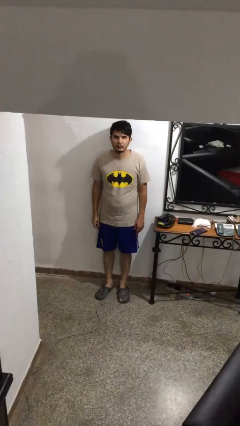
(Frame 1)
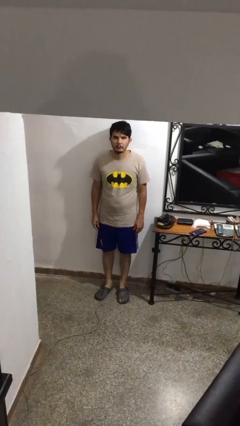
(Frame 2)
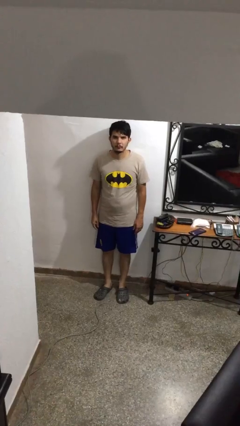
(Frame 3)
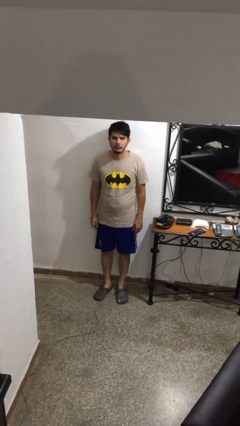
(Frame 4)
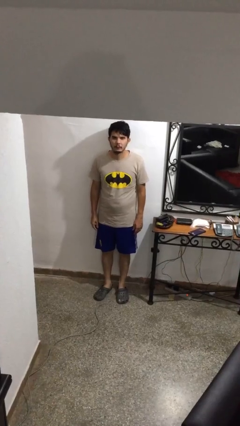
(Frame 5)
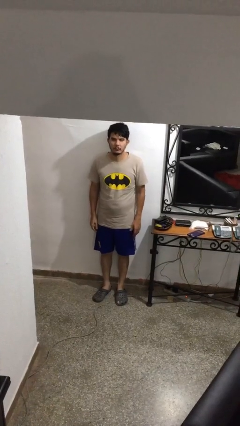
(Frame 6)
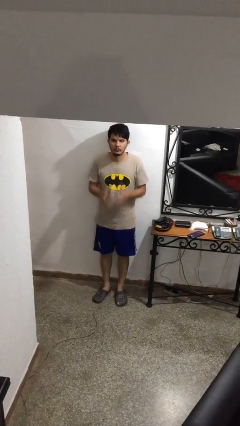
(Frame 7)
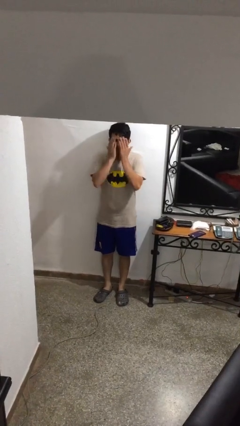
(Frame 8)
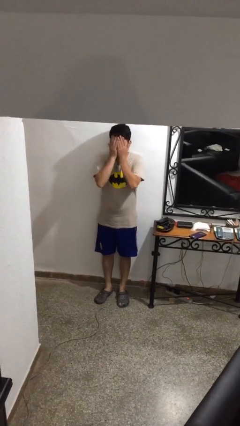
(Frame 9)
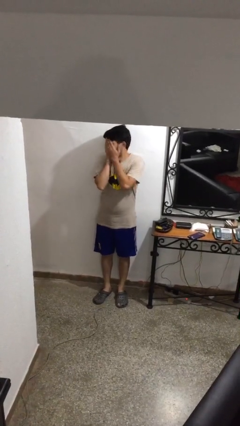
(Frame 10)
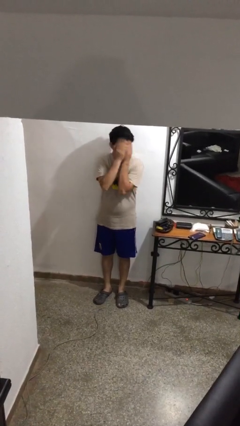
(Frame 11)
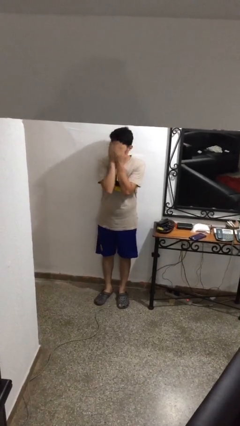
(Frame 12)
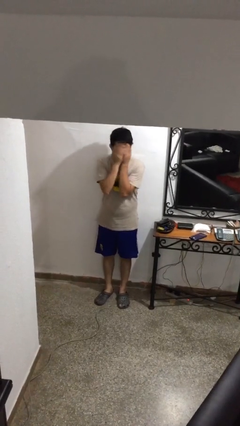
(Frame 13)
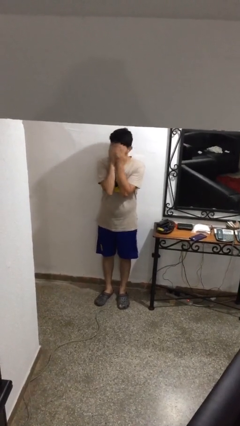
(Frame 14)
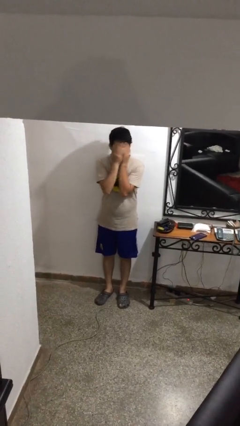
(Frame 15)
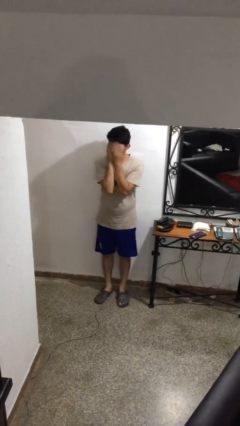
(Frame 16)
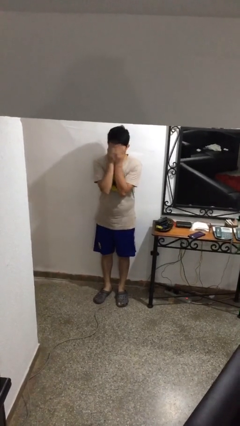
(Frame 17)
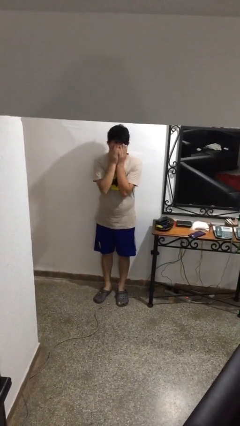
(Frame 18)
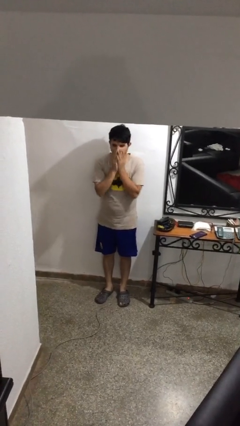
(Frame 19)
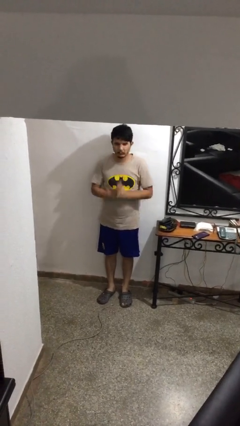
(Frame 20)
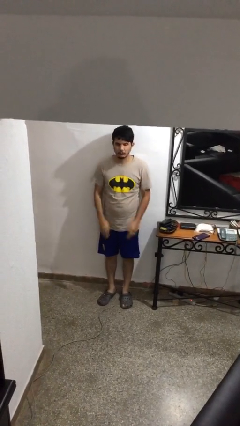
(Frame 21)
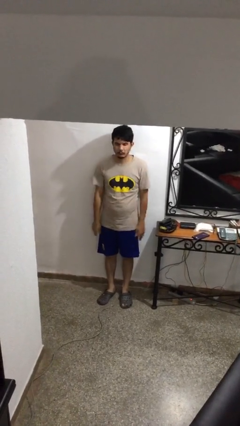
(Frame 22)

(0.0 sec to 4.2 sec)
person covers face with hands

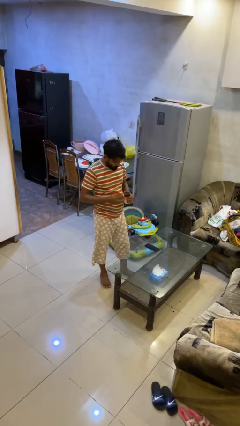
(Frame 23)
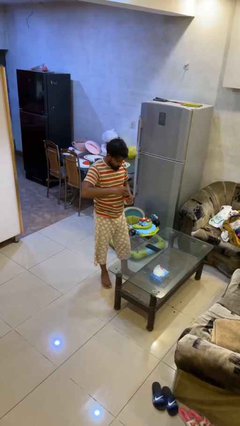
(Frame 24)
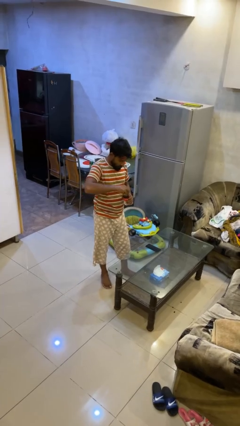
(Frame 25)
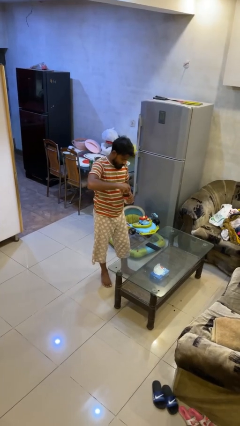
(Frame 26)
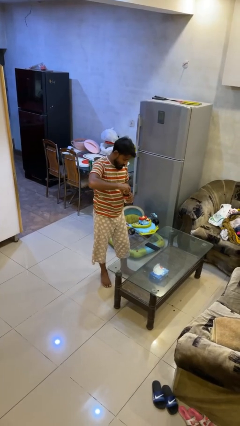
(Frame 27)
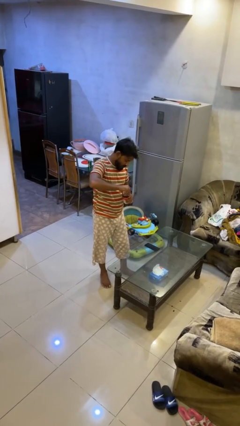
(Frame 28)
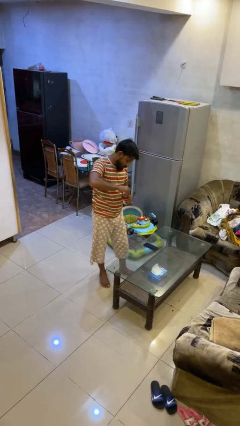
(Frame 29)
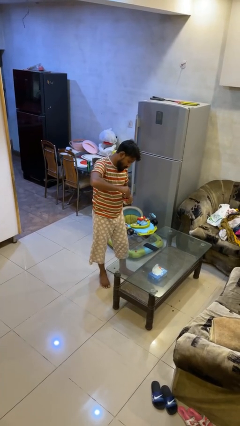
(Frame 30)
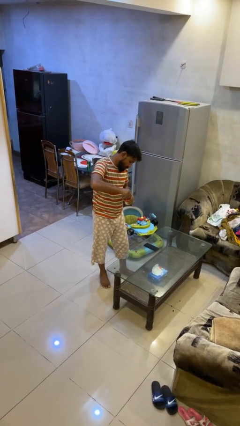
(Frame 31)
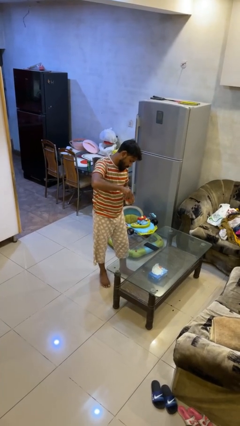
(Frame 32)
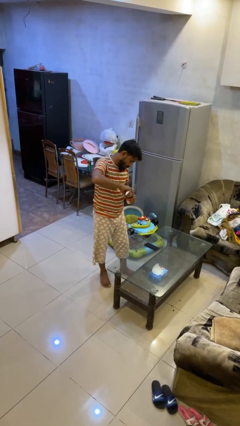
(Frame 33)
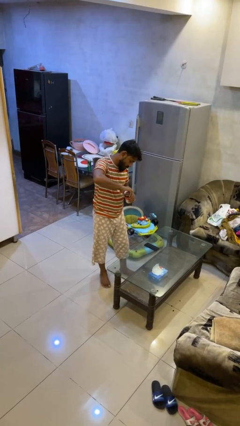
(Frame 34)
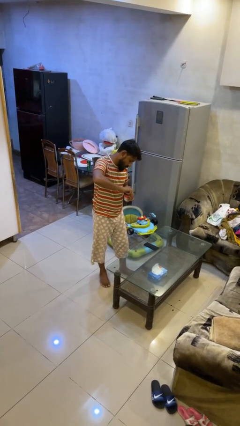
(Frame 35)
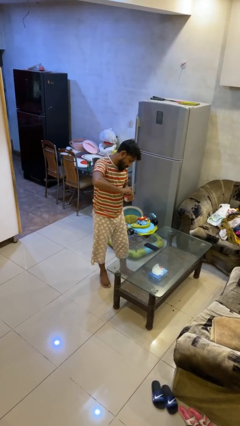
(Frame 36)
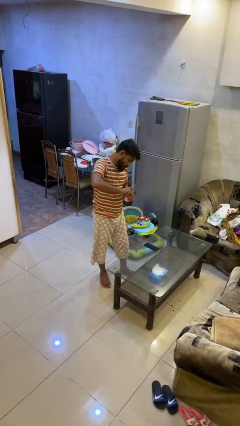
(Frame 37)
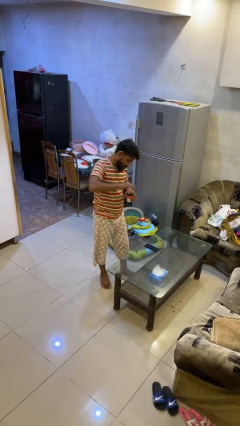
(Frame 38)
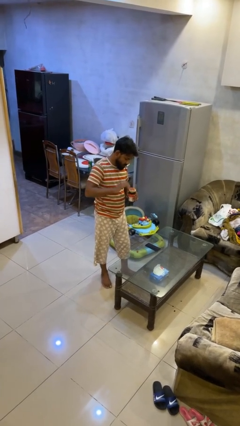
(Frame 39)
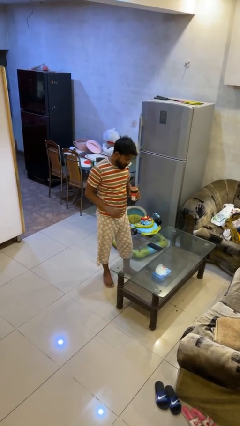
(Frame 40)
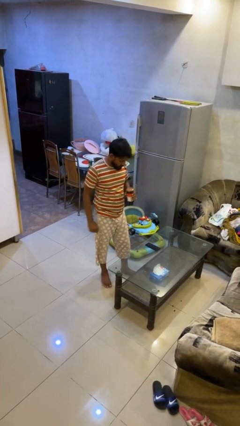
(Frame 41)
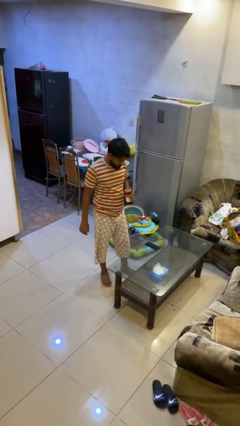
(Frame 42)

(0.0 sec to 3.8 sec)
person closes jar

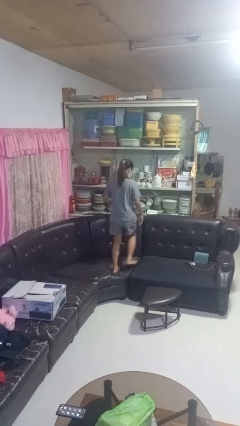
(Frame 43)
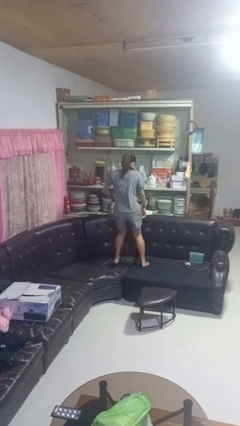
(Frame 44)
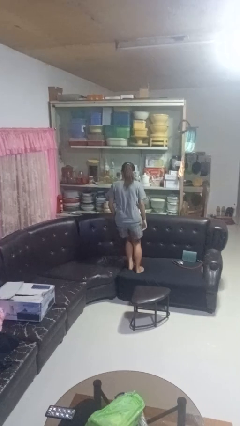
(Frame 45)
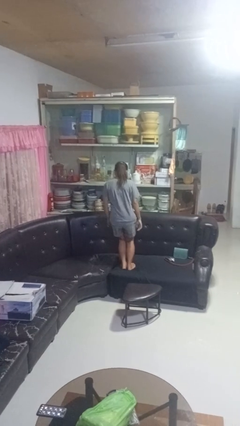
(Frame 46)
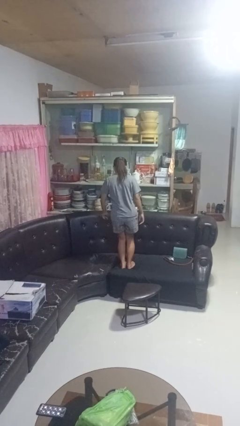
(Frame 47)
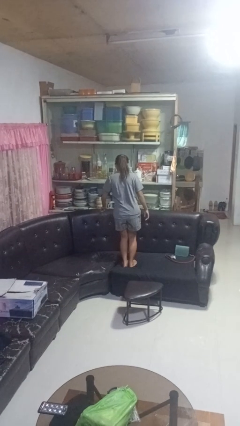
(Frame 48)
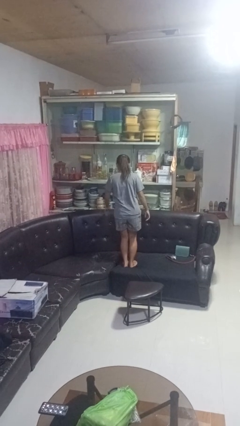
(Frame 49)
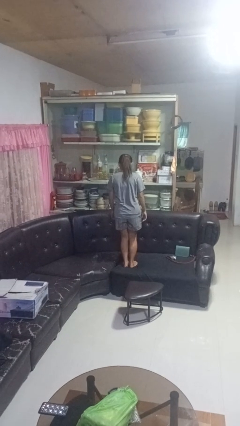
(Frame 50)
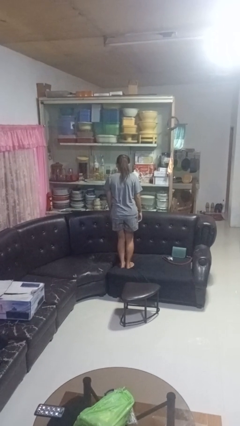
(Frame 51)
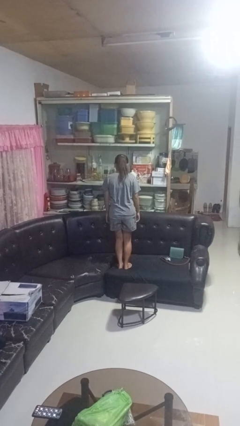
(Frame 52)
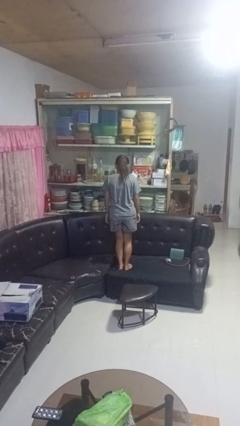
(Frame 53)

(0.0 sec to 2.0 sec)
person jumps on couch

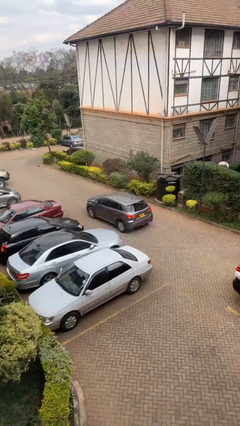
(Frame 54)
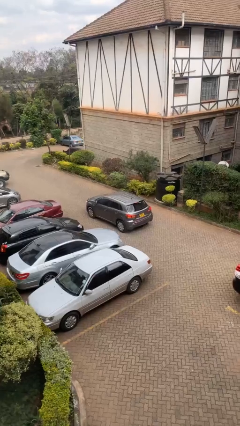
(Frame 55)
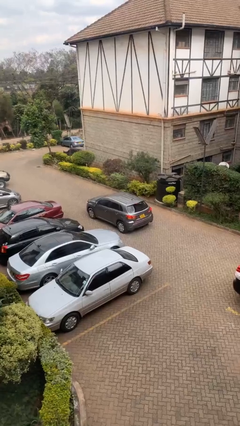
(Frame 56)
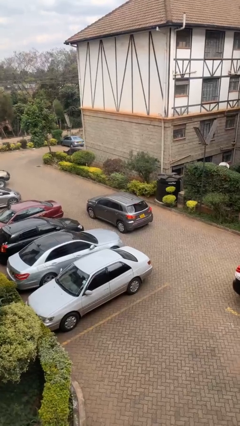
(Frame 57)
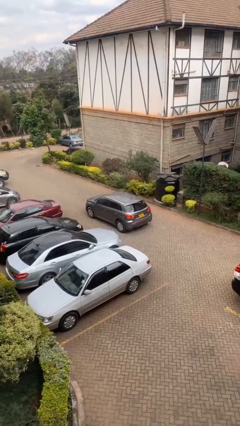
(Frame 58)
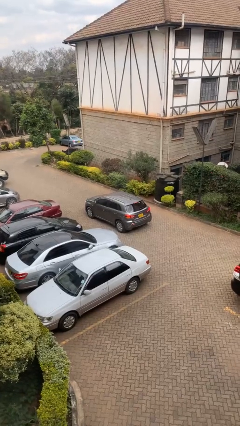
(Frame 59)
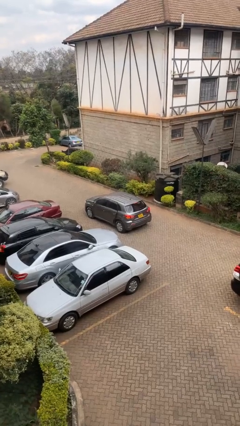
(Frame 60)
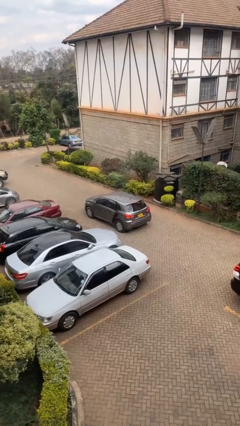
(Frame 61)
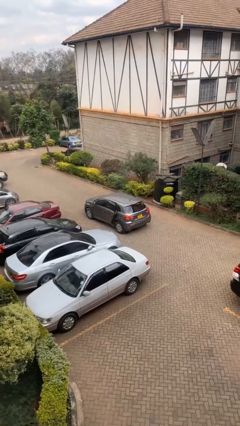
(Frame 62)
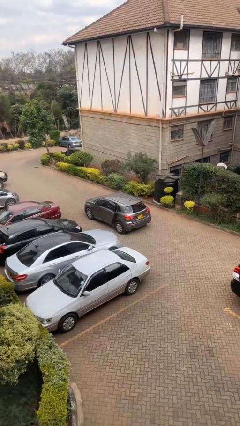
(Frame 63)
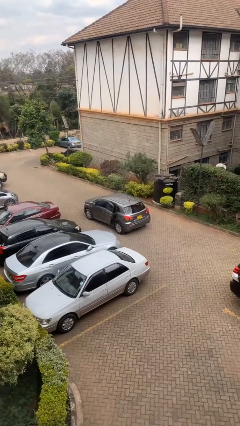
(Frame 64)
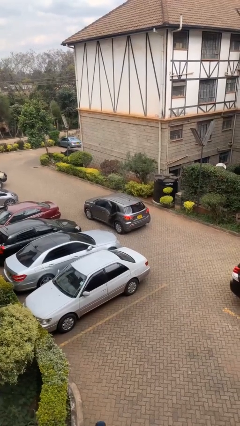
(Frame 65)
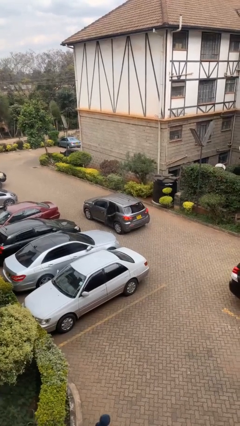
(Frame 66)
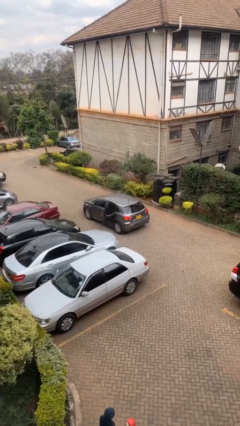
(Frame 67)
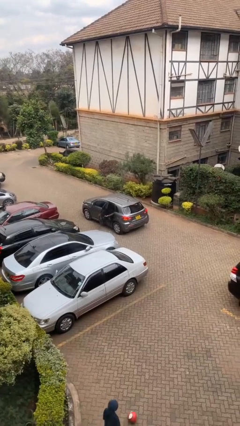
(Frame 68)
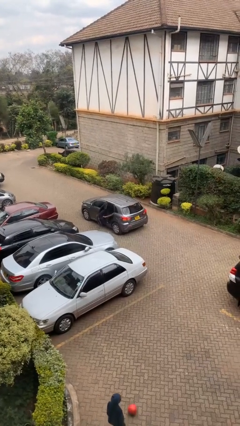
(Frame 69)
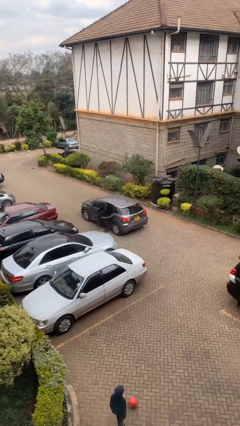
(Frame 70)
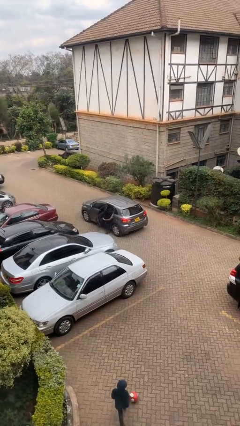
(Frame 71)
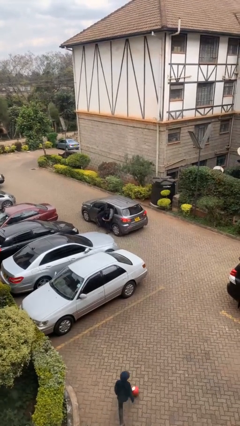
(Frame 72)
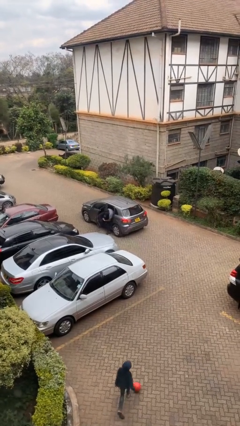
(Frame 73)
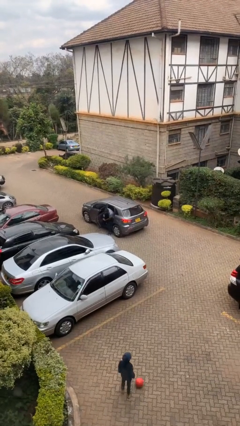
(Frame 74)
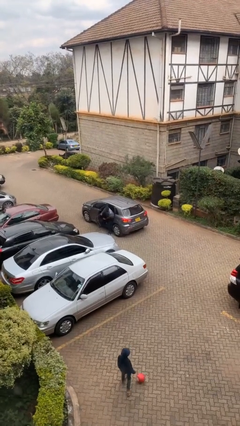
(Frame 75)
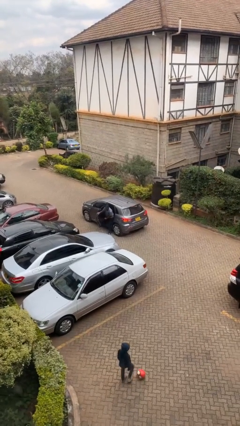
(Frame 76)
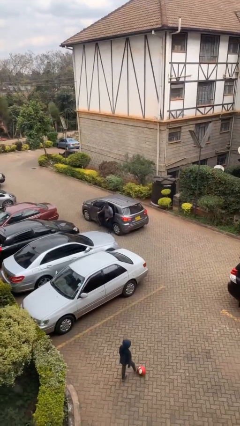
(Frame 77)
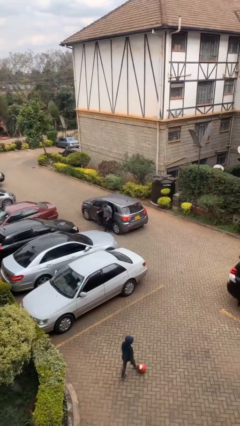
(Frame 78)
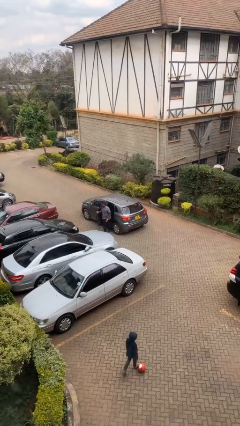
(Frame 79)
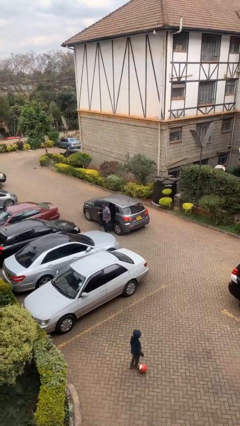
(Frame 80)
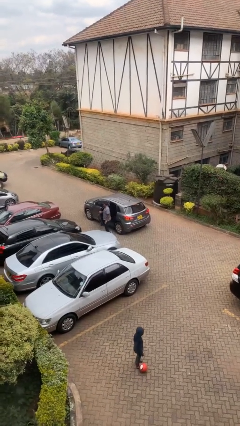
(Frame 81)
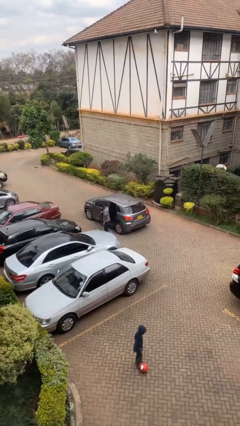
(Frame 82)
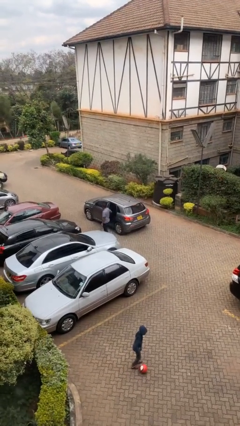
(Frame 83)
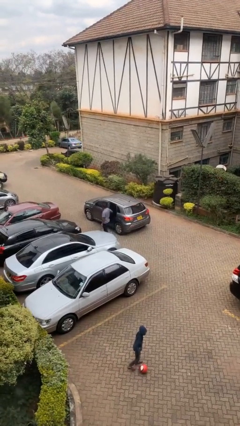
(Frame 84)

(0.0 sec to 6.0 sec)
car drops off person

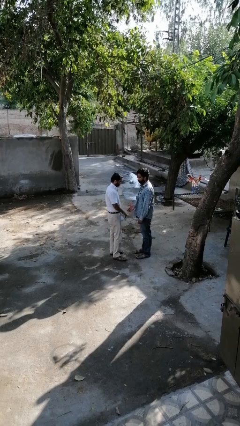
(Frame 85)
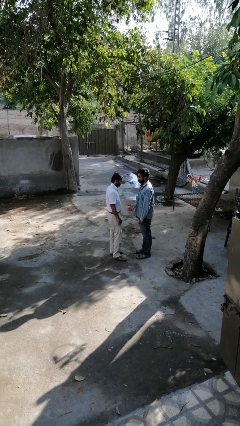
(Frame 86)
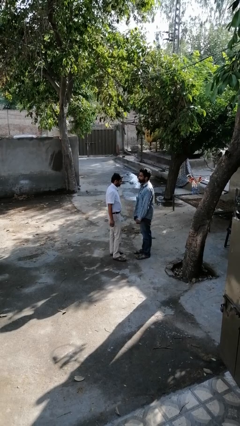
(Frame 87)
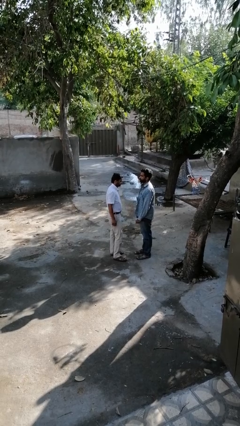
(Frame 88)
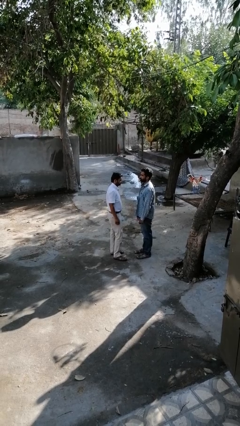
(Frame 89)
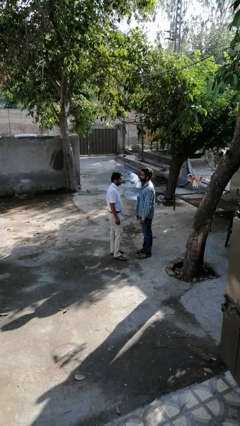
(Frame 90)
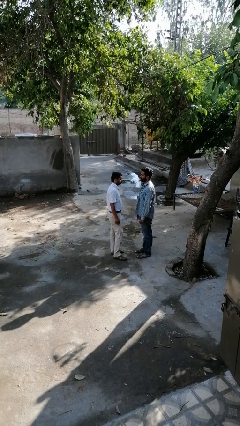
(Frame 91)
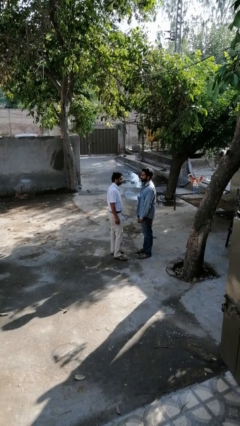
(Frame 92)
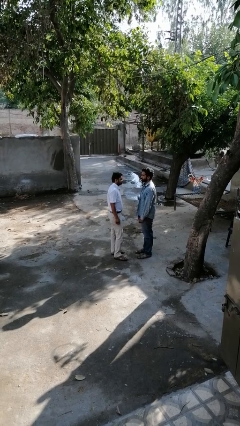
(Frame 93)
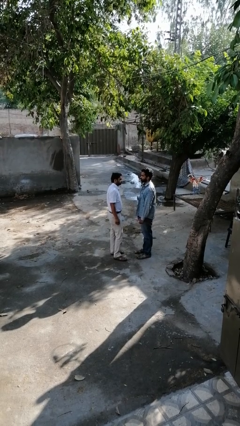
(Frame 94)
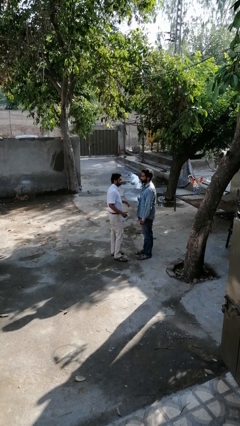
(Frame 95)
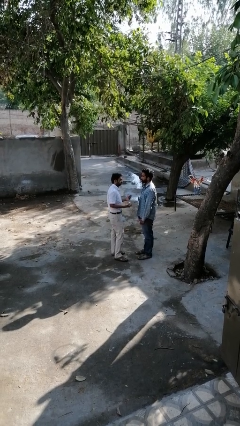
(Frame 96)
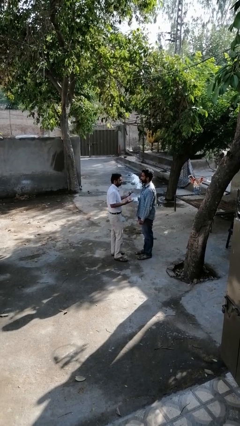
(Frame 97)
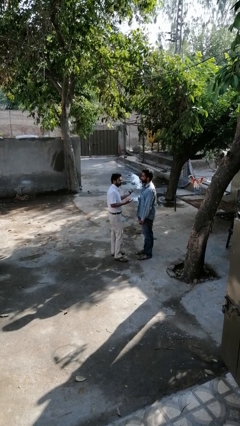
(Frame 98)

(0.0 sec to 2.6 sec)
person highfives hand
